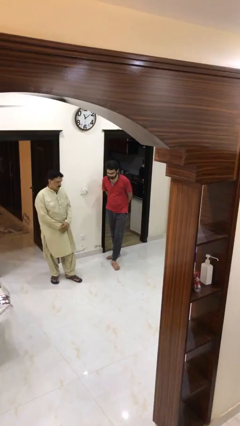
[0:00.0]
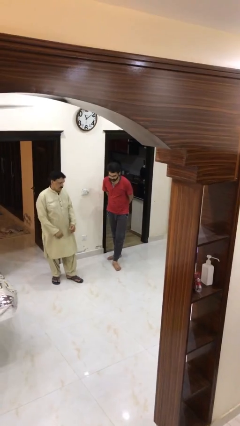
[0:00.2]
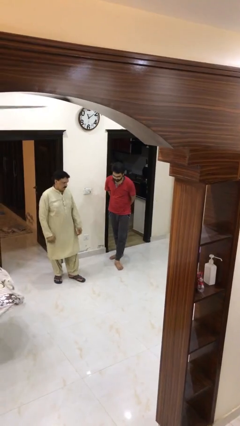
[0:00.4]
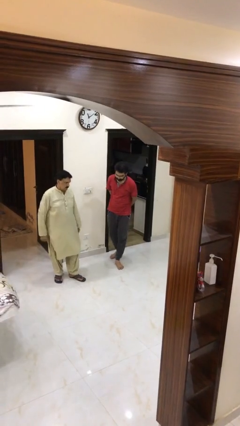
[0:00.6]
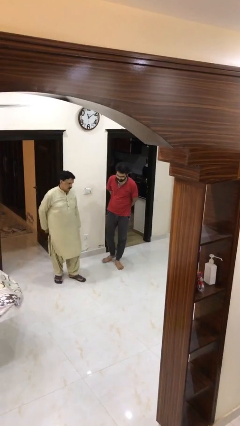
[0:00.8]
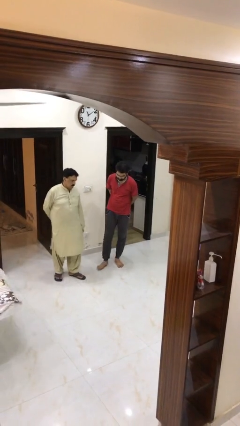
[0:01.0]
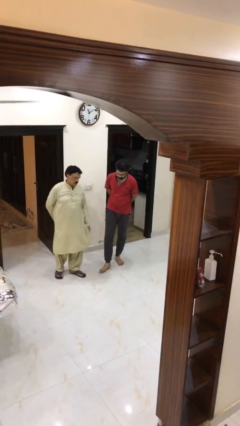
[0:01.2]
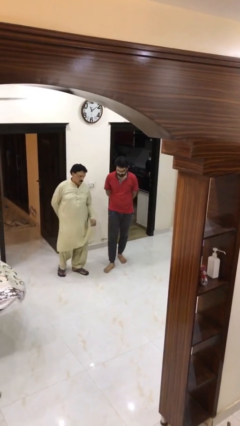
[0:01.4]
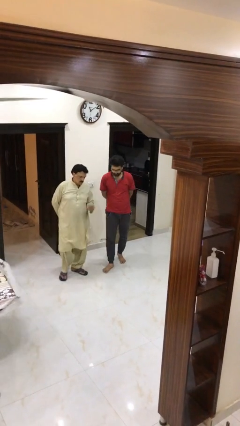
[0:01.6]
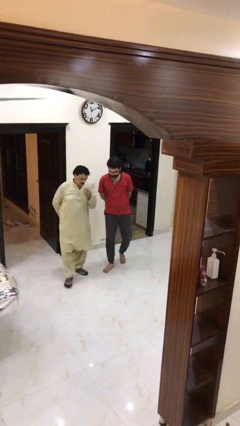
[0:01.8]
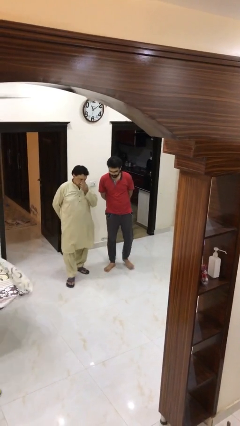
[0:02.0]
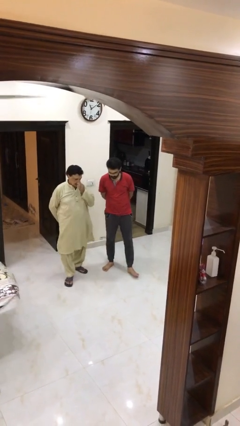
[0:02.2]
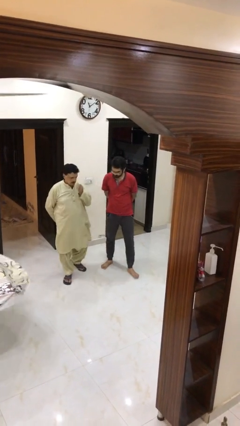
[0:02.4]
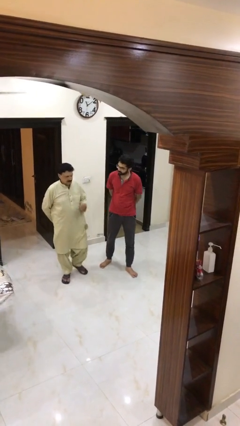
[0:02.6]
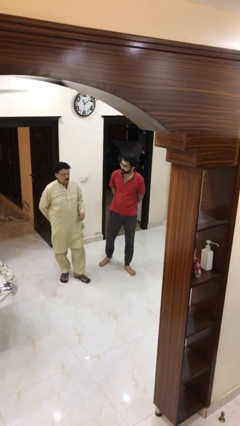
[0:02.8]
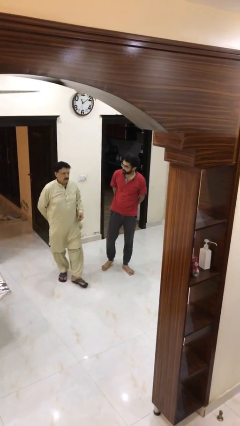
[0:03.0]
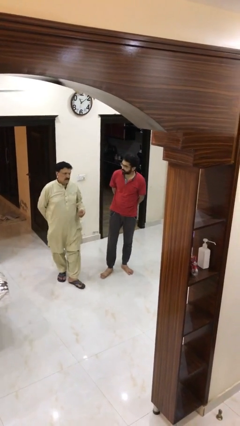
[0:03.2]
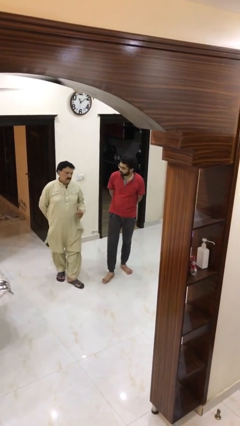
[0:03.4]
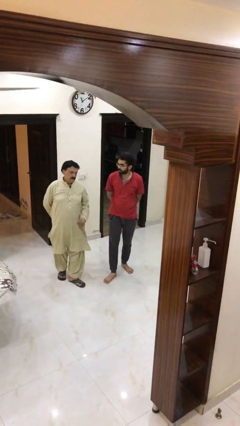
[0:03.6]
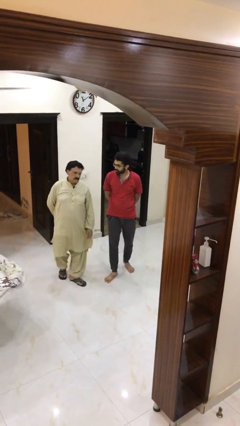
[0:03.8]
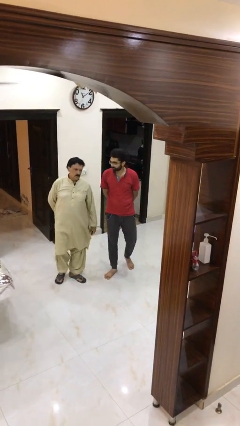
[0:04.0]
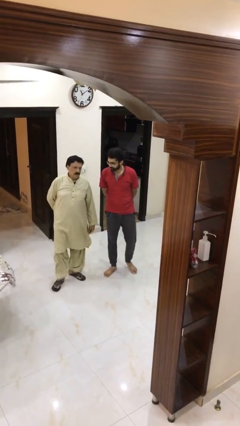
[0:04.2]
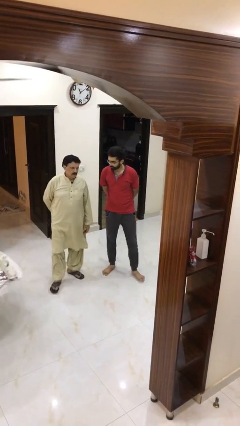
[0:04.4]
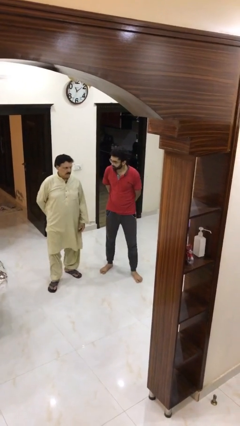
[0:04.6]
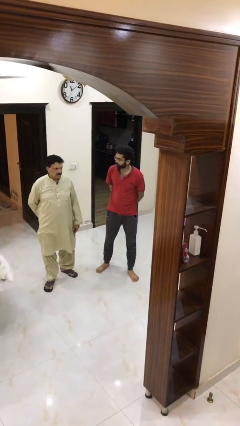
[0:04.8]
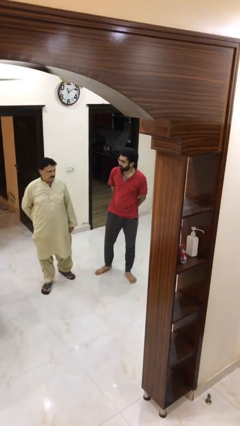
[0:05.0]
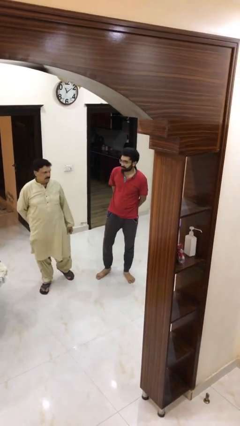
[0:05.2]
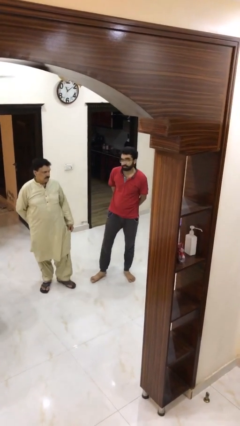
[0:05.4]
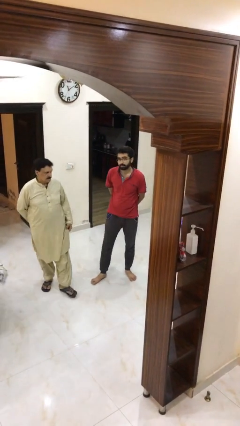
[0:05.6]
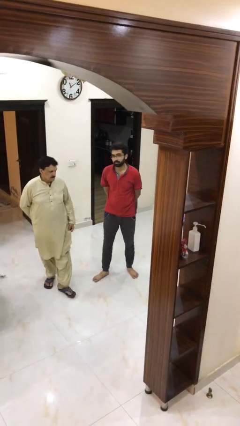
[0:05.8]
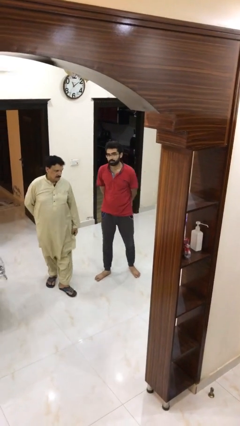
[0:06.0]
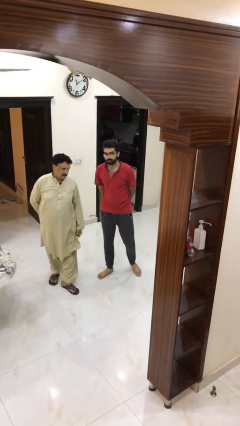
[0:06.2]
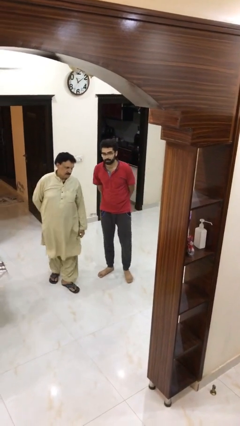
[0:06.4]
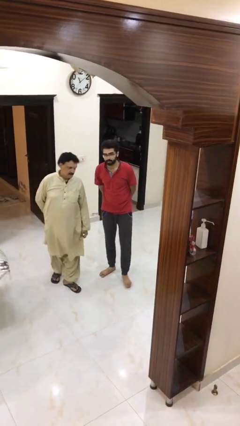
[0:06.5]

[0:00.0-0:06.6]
person talks to person

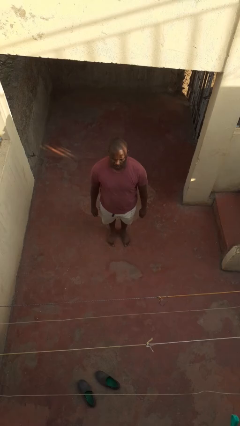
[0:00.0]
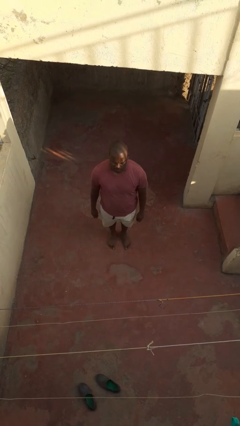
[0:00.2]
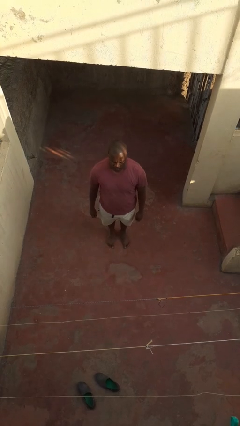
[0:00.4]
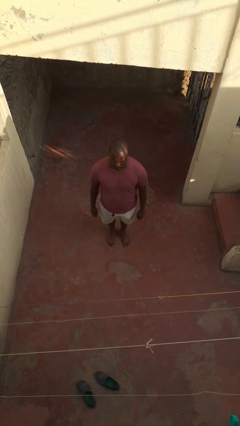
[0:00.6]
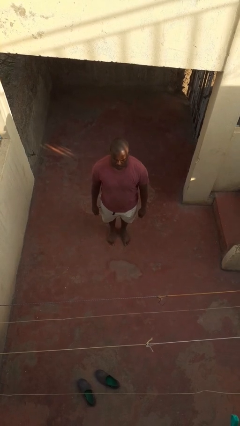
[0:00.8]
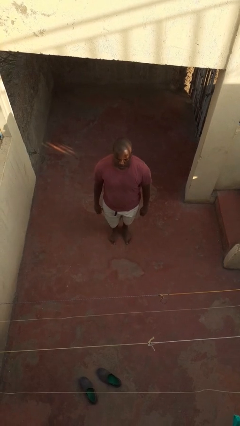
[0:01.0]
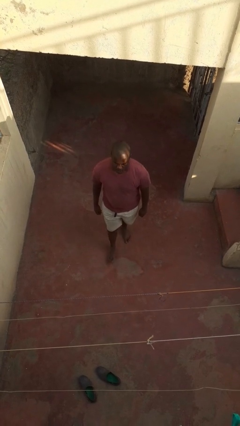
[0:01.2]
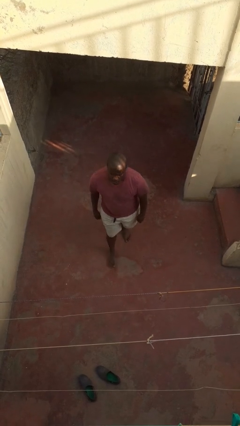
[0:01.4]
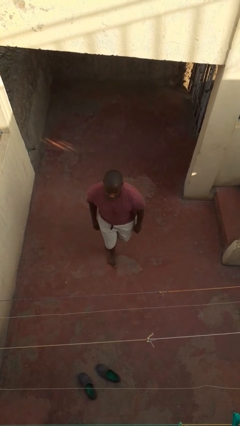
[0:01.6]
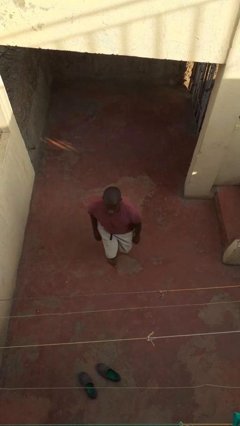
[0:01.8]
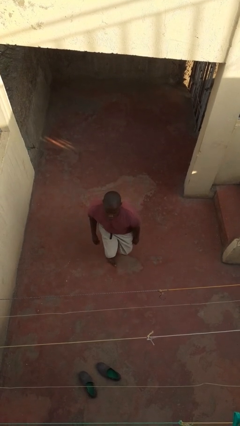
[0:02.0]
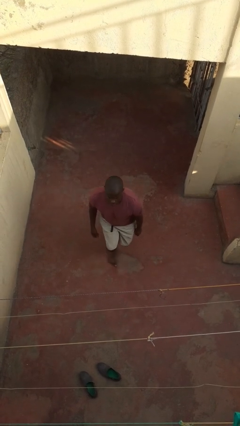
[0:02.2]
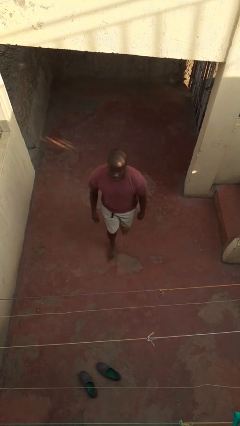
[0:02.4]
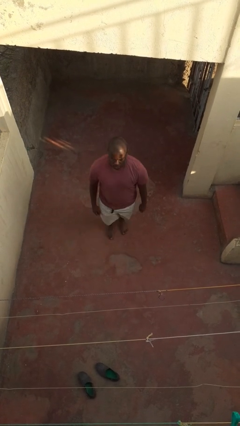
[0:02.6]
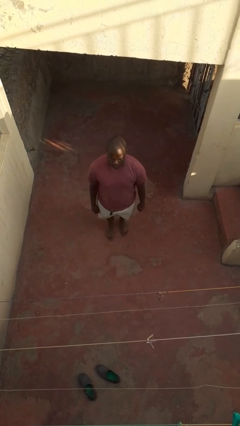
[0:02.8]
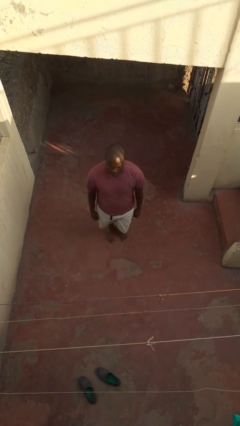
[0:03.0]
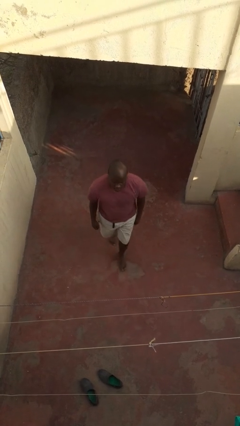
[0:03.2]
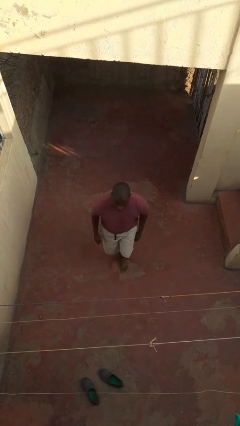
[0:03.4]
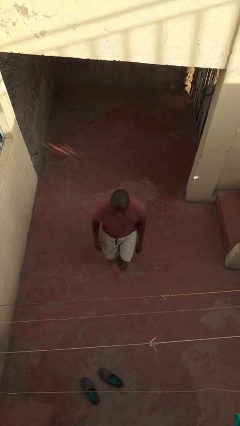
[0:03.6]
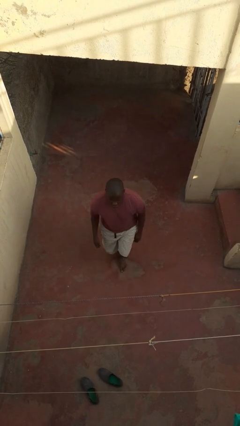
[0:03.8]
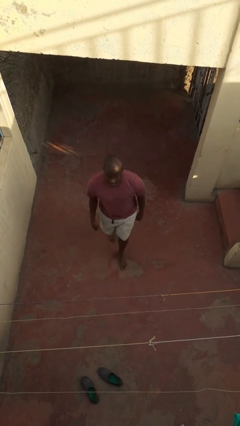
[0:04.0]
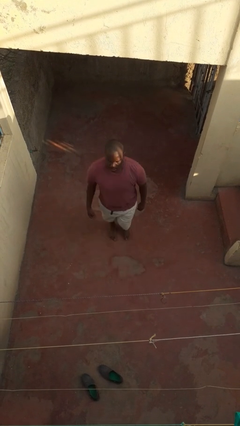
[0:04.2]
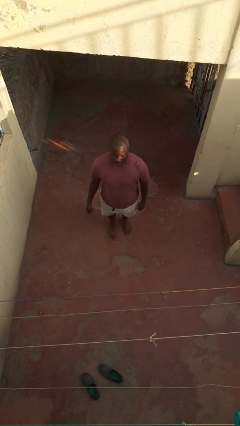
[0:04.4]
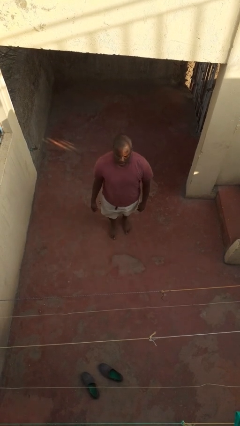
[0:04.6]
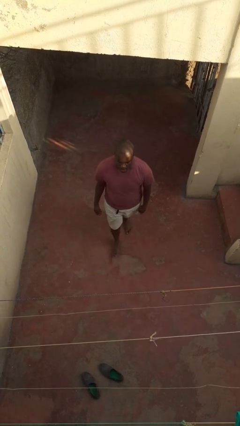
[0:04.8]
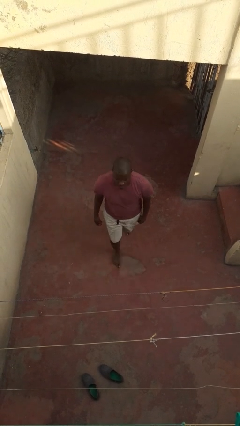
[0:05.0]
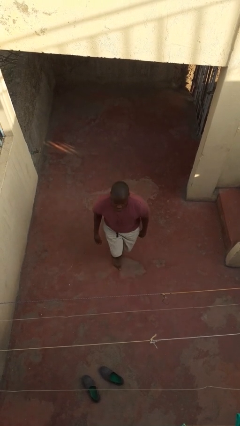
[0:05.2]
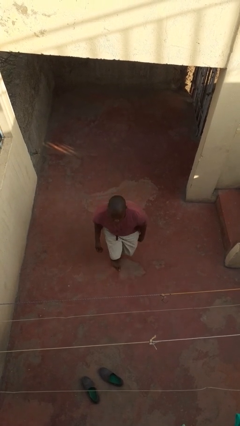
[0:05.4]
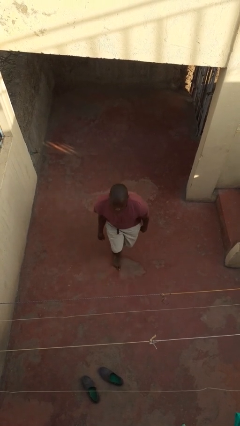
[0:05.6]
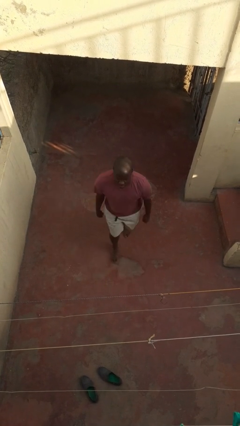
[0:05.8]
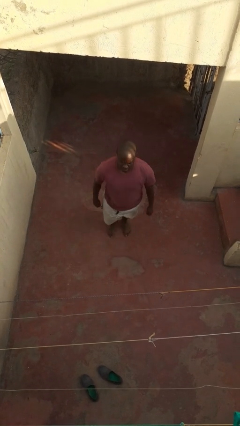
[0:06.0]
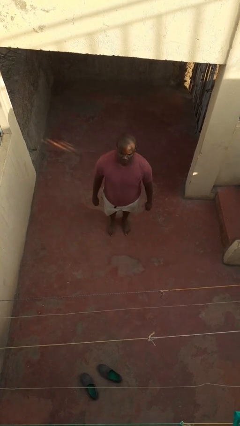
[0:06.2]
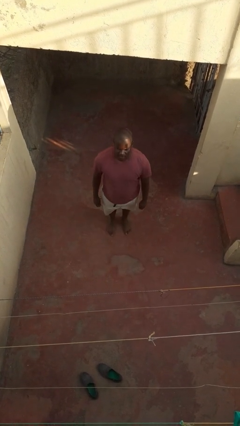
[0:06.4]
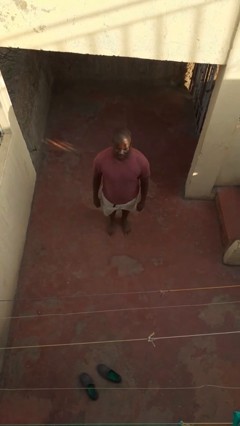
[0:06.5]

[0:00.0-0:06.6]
person exercises with lunges

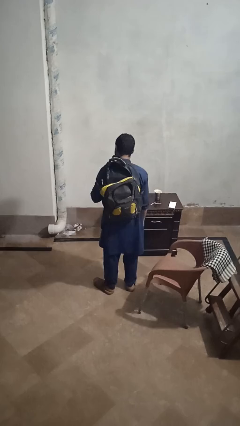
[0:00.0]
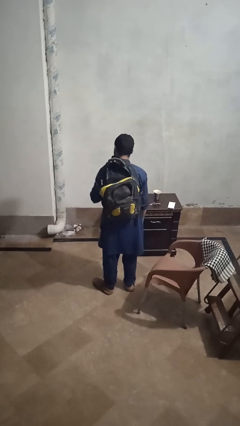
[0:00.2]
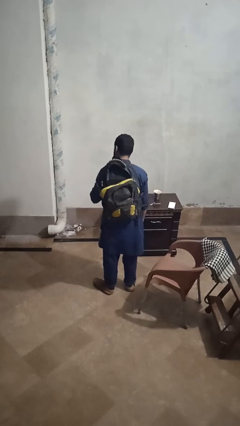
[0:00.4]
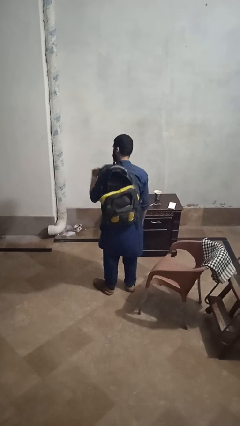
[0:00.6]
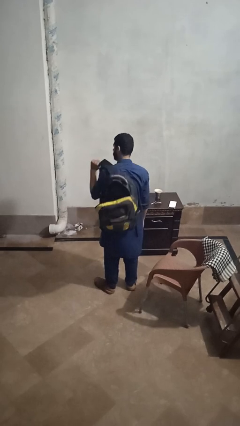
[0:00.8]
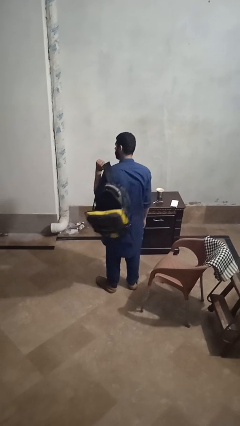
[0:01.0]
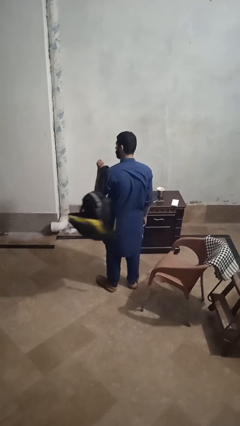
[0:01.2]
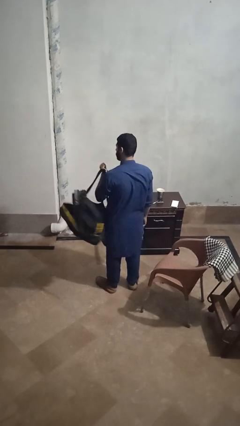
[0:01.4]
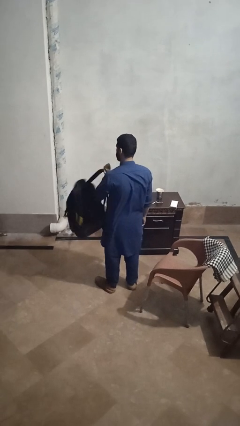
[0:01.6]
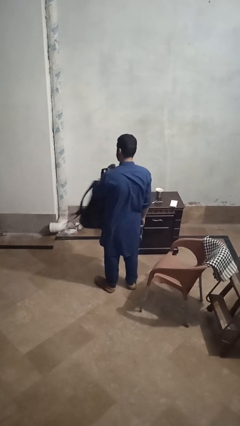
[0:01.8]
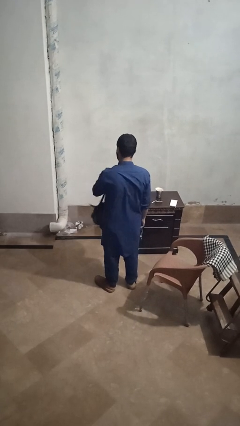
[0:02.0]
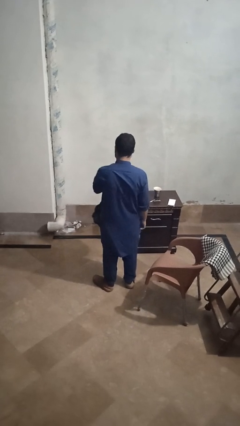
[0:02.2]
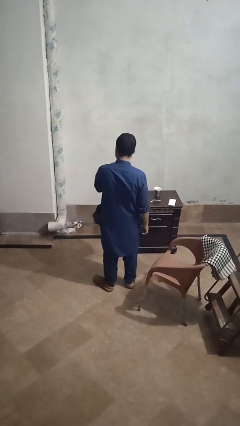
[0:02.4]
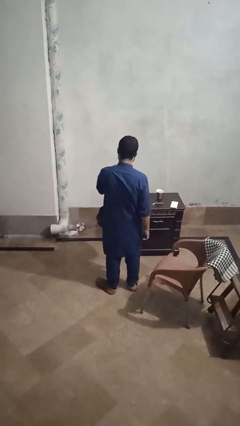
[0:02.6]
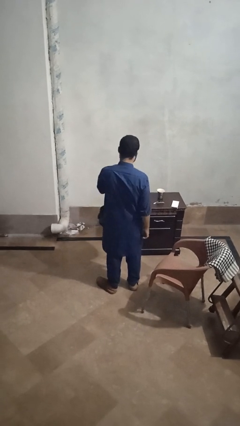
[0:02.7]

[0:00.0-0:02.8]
person takes off backpack

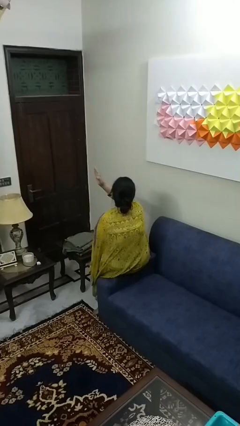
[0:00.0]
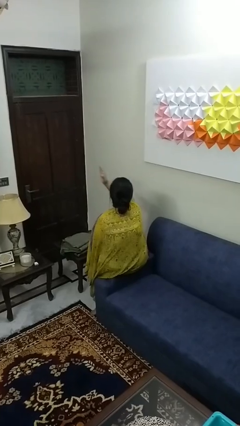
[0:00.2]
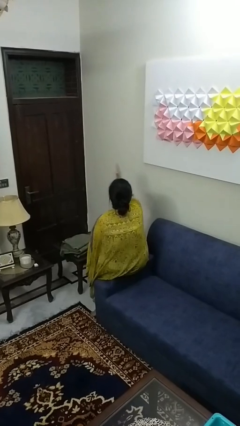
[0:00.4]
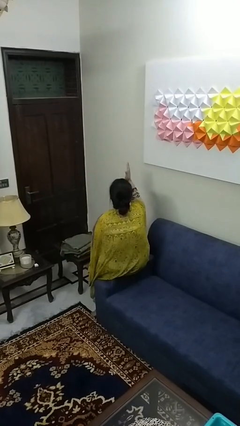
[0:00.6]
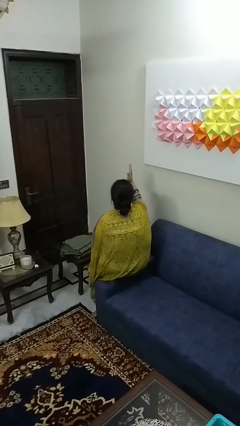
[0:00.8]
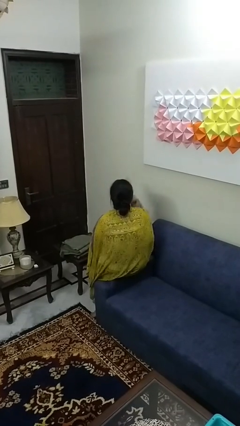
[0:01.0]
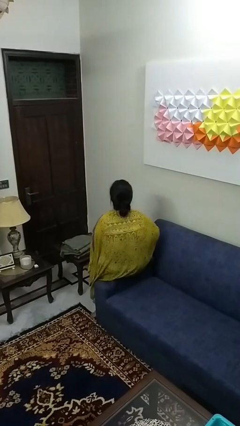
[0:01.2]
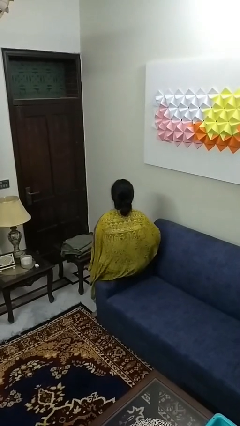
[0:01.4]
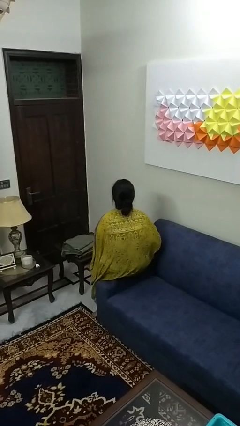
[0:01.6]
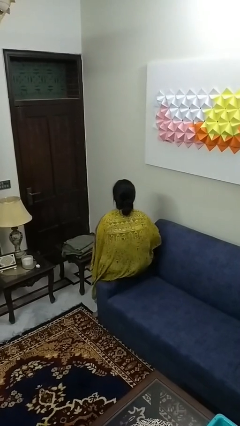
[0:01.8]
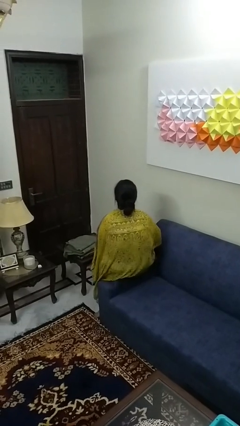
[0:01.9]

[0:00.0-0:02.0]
person gestures swipe right
